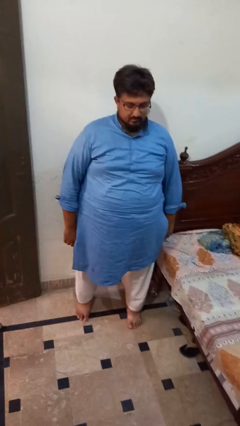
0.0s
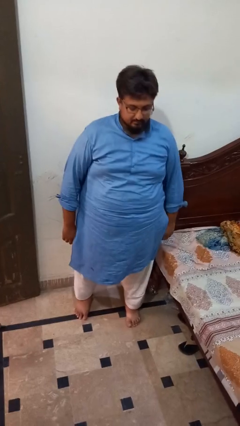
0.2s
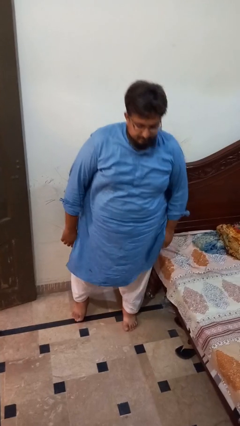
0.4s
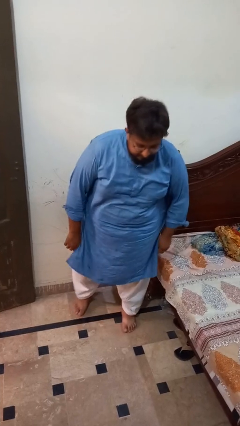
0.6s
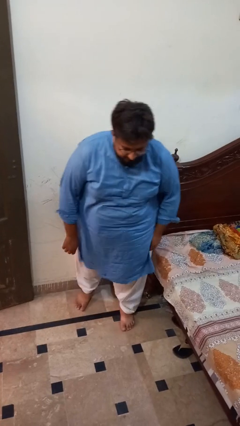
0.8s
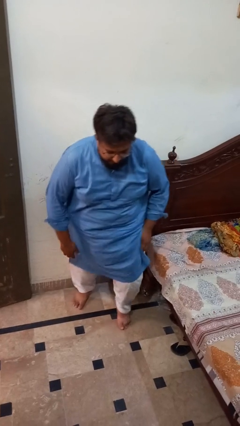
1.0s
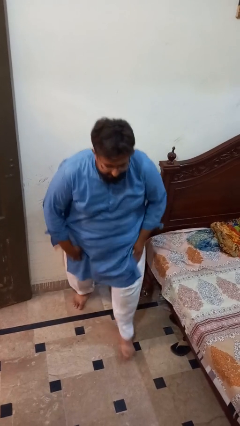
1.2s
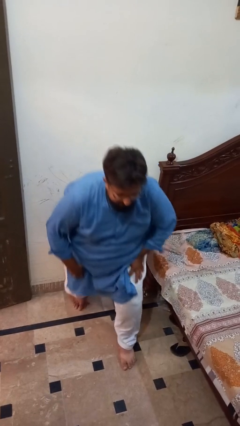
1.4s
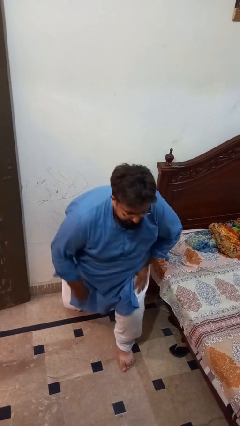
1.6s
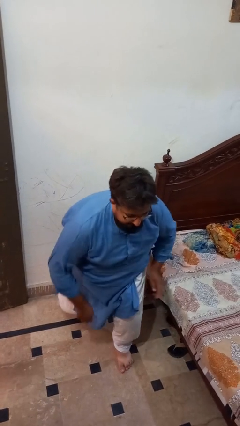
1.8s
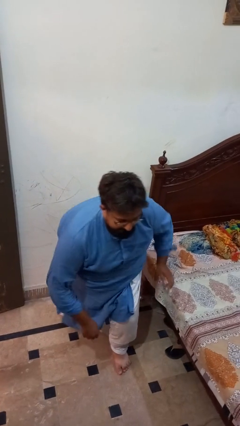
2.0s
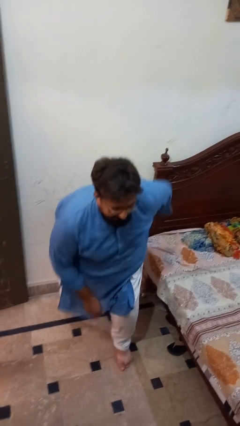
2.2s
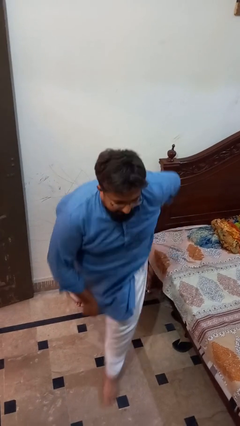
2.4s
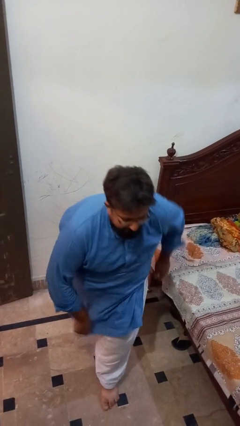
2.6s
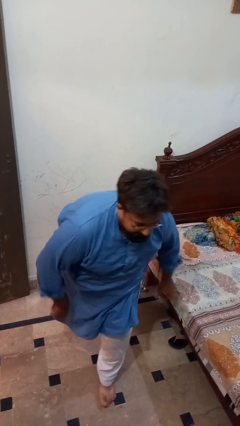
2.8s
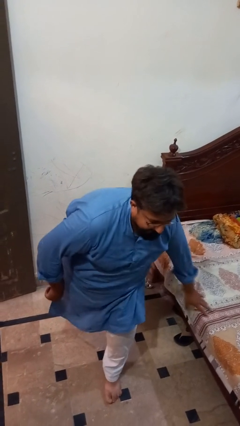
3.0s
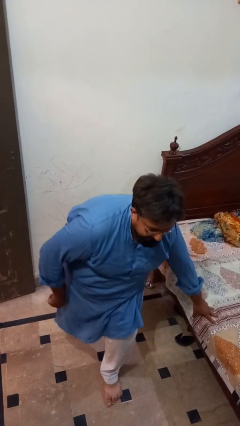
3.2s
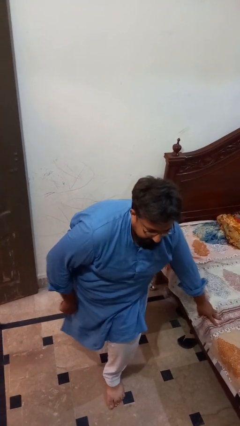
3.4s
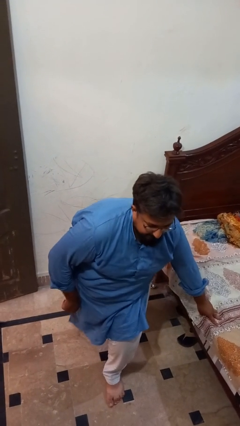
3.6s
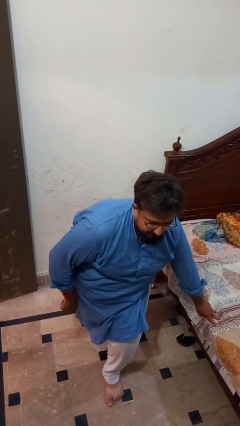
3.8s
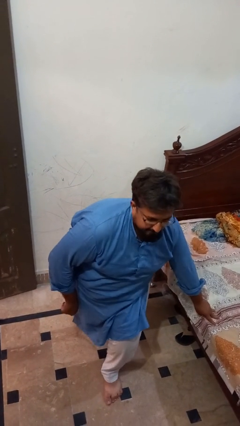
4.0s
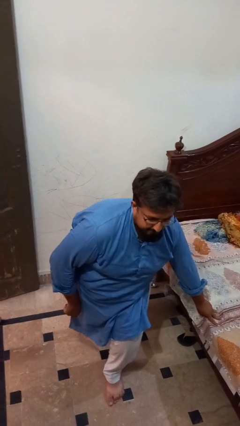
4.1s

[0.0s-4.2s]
person exercises with lunges

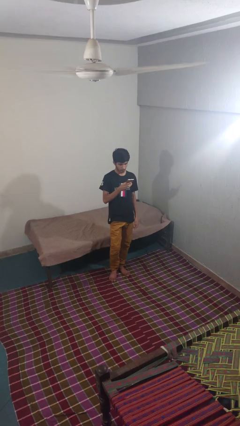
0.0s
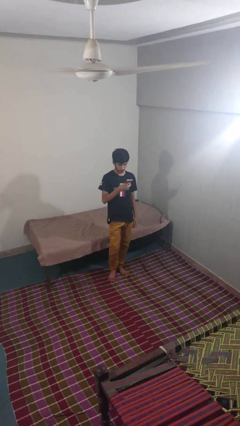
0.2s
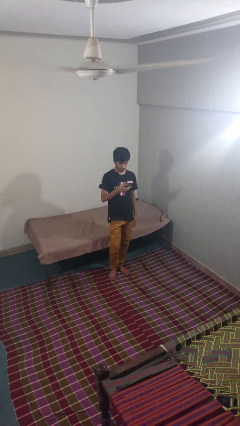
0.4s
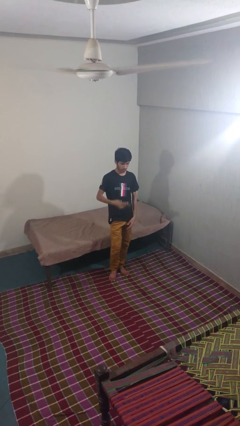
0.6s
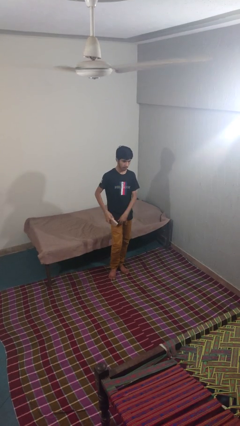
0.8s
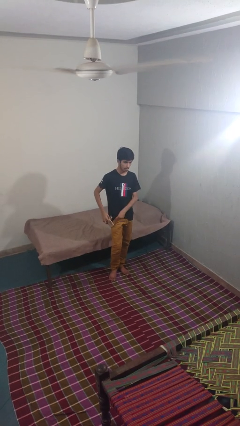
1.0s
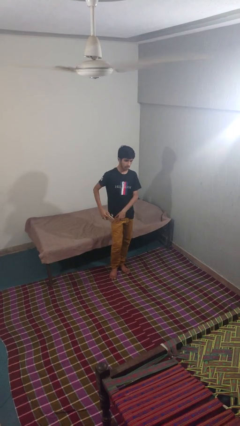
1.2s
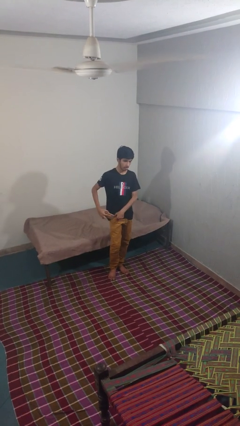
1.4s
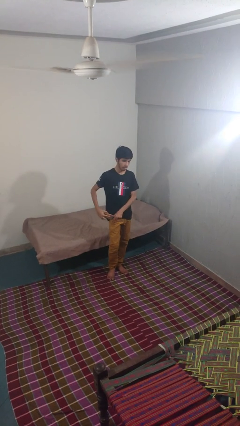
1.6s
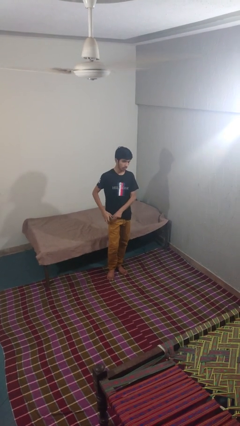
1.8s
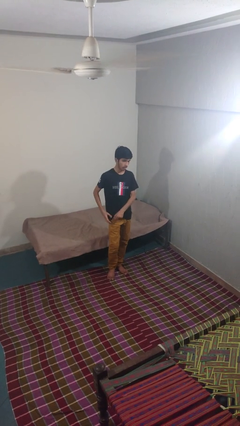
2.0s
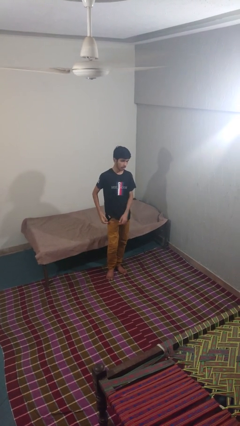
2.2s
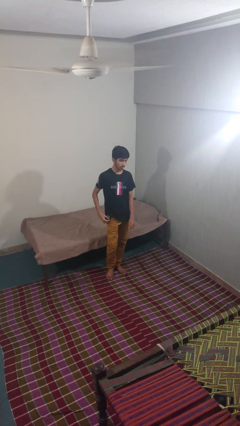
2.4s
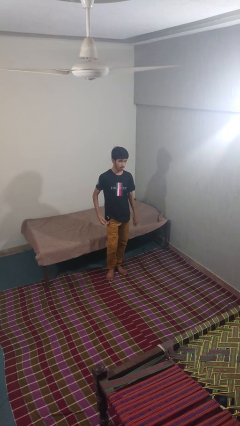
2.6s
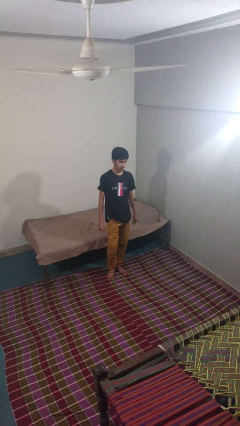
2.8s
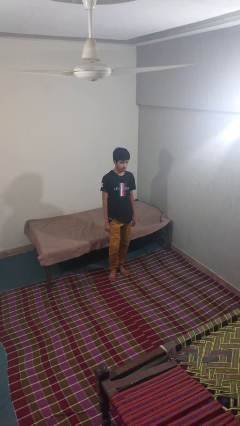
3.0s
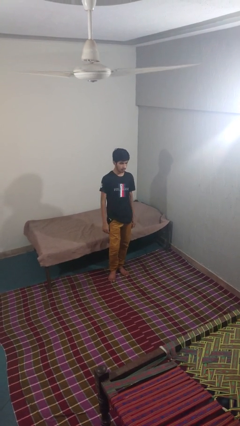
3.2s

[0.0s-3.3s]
person puts phone into pocket

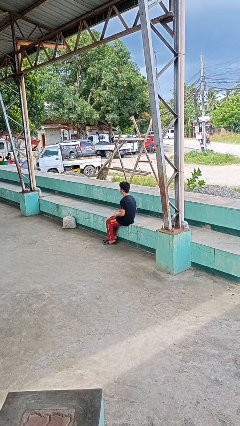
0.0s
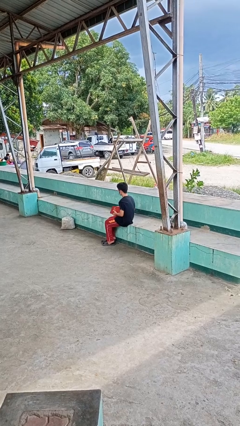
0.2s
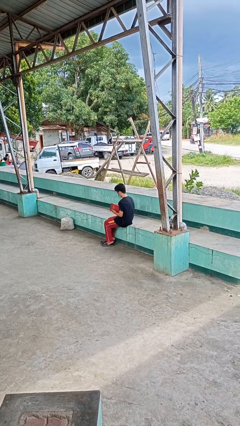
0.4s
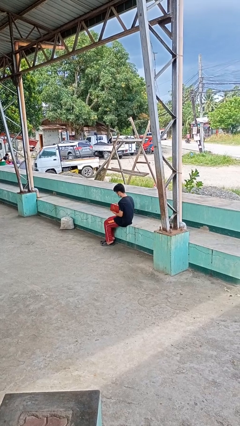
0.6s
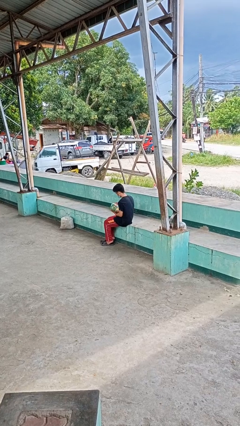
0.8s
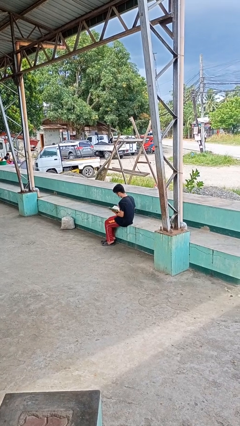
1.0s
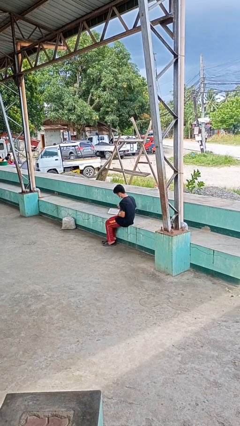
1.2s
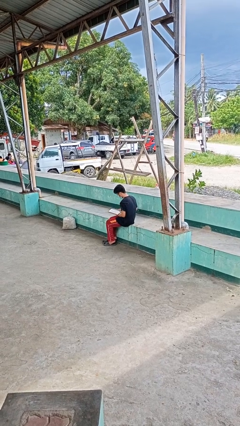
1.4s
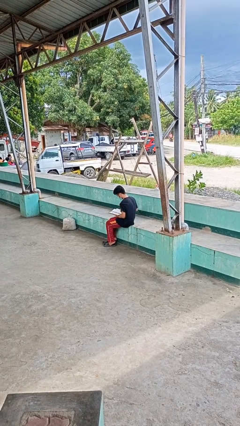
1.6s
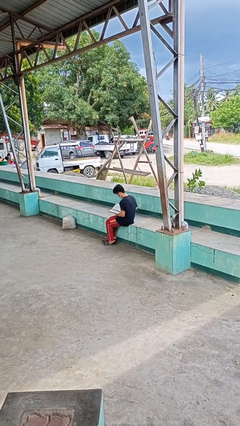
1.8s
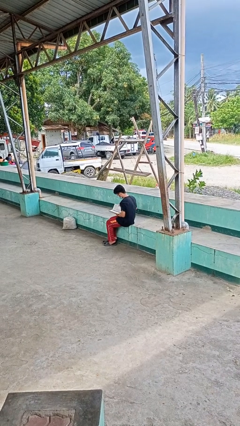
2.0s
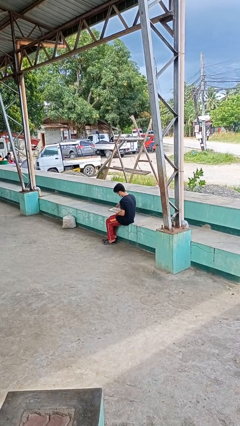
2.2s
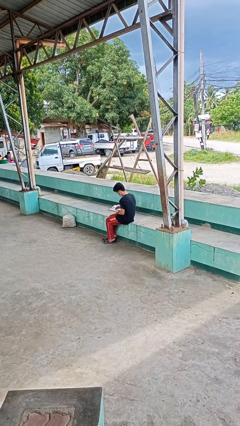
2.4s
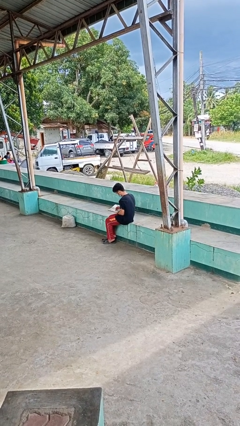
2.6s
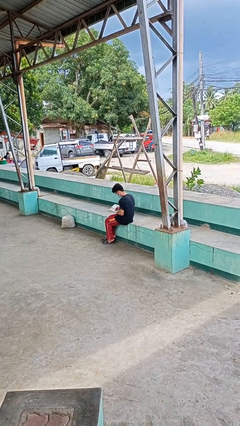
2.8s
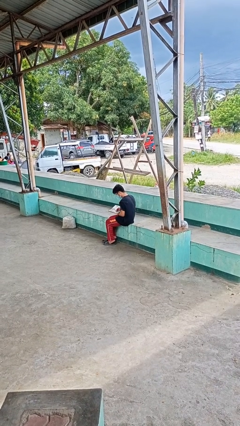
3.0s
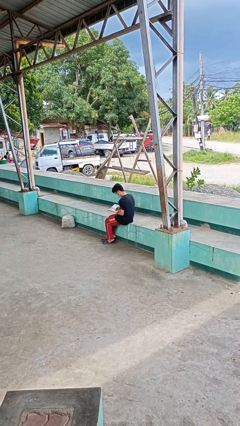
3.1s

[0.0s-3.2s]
person reads book

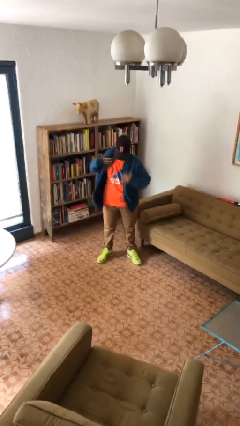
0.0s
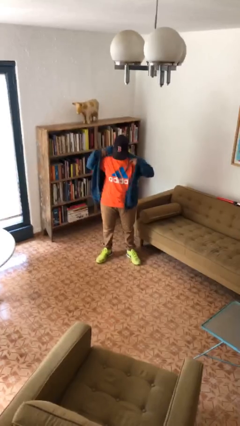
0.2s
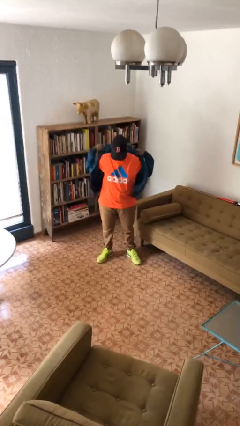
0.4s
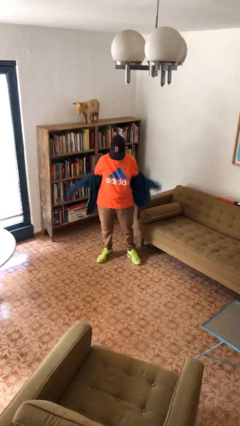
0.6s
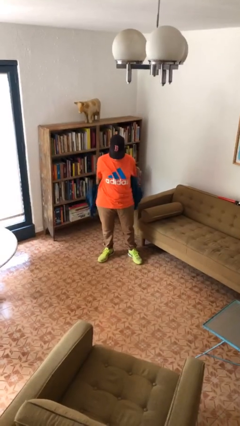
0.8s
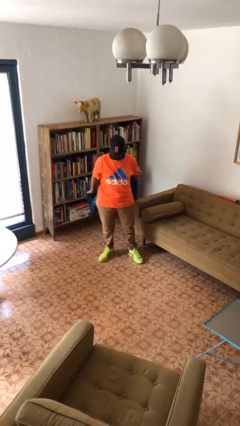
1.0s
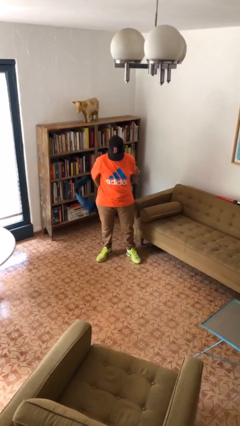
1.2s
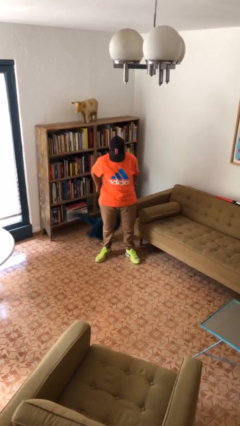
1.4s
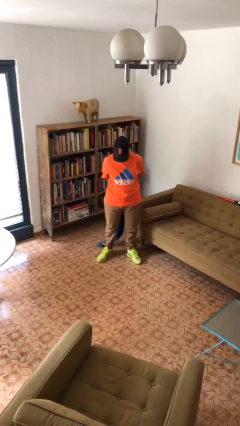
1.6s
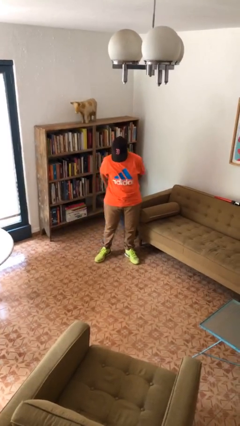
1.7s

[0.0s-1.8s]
person takes off jacket

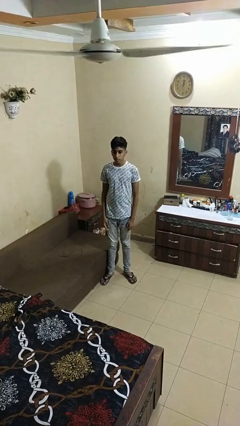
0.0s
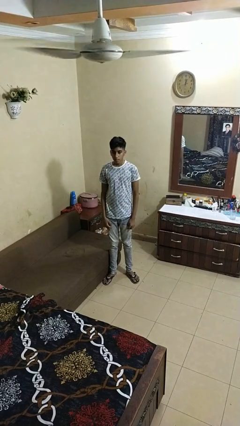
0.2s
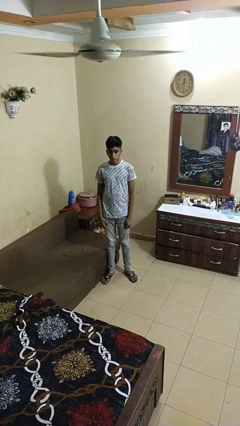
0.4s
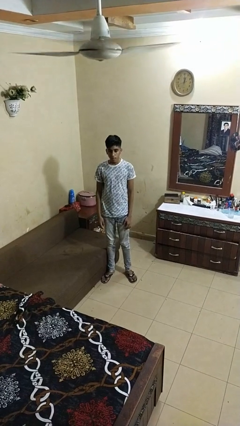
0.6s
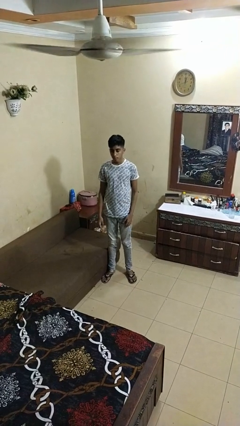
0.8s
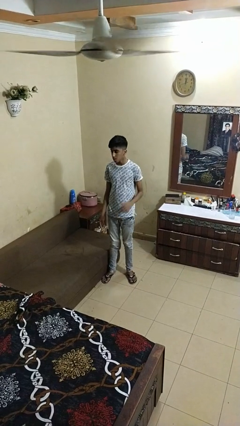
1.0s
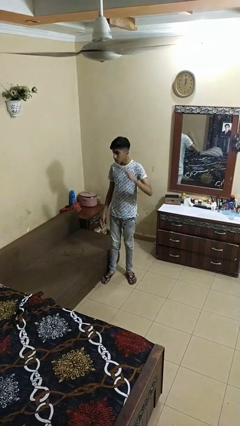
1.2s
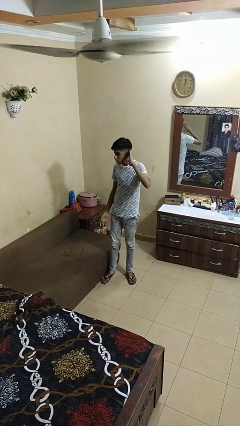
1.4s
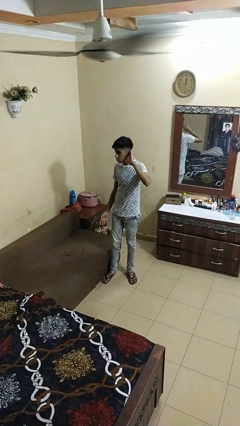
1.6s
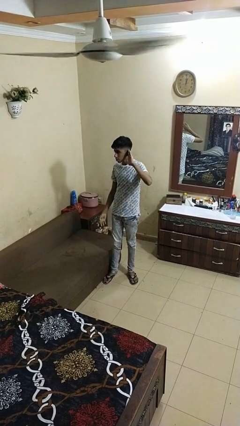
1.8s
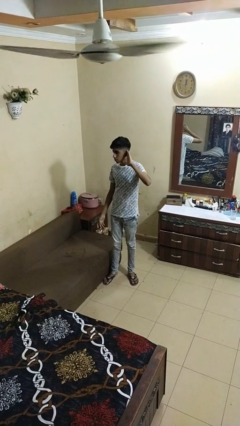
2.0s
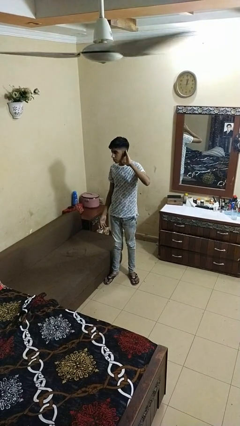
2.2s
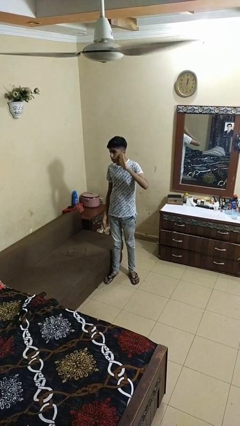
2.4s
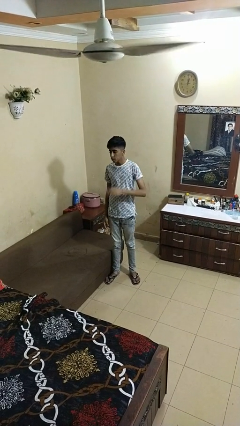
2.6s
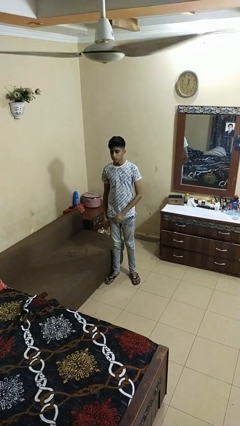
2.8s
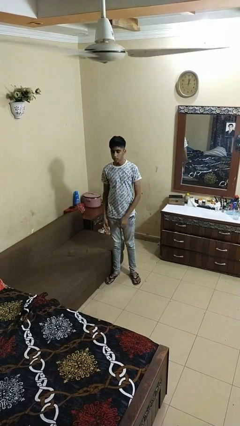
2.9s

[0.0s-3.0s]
person gestures listen closely

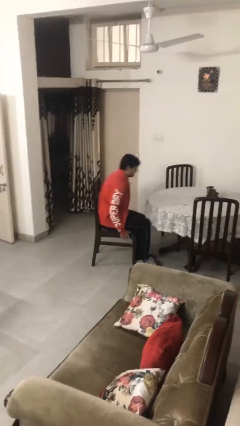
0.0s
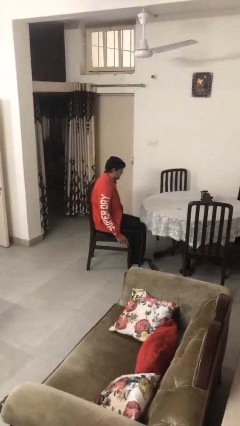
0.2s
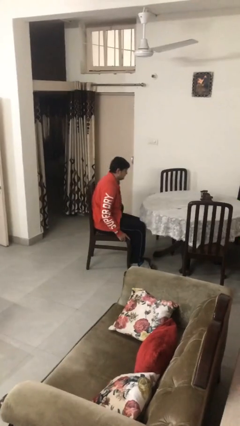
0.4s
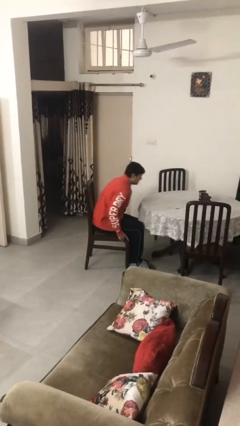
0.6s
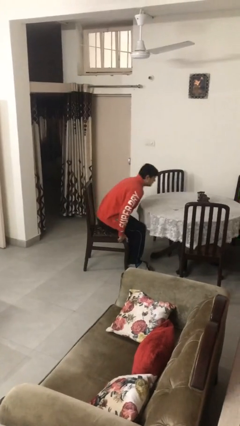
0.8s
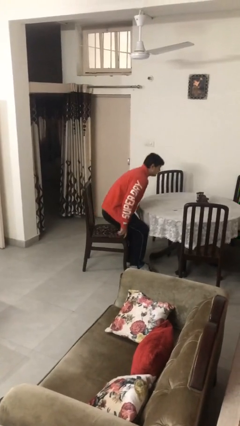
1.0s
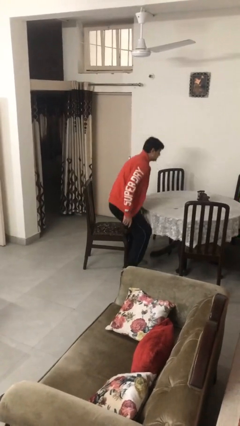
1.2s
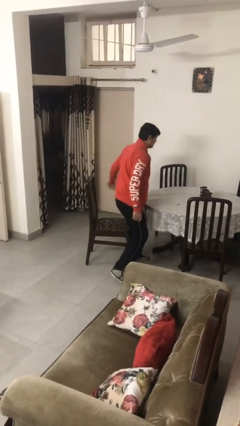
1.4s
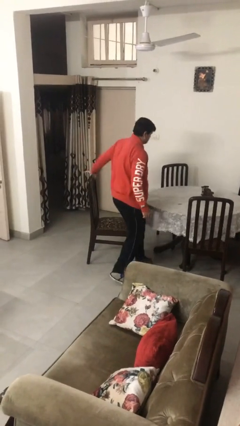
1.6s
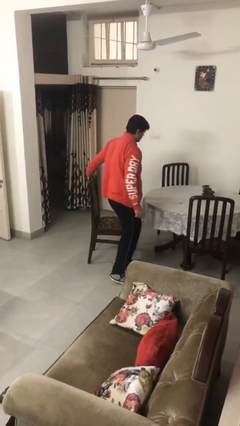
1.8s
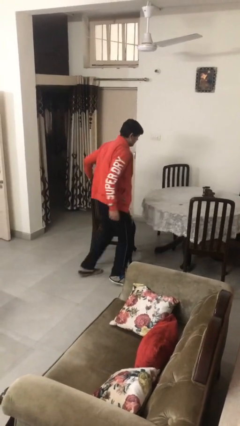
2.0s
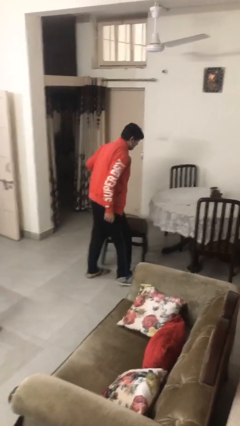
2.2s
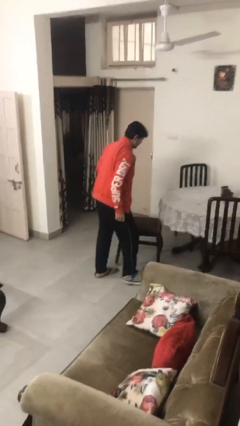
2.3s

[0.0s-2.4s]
person stands up
